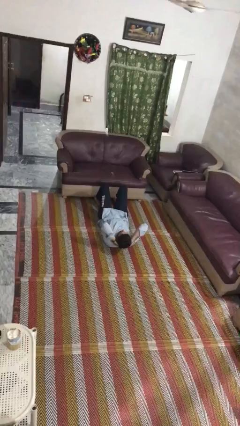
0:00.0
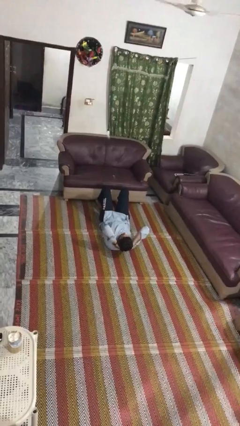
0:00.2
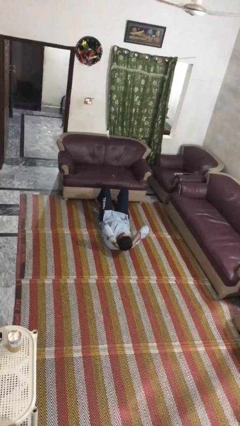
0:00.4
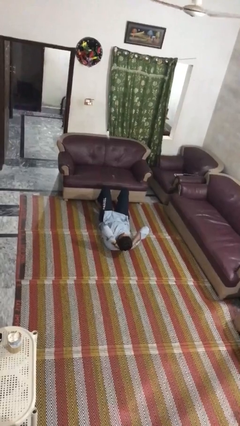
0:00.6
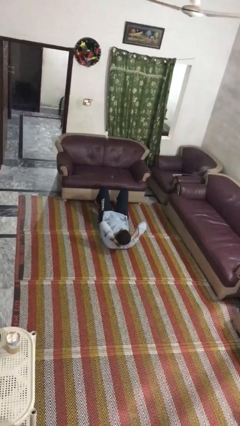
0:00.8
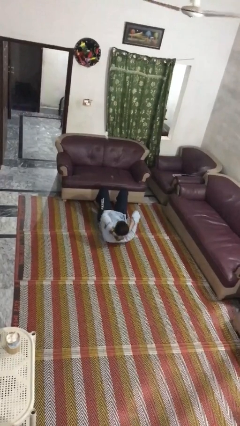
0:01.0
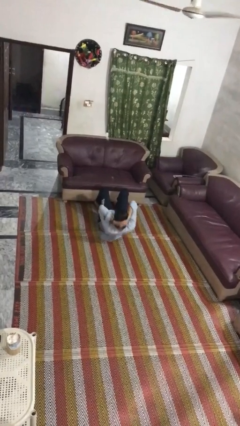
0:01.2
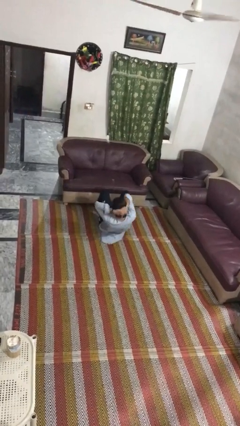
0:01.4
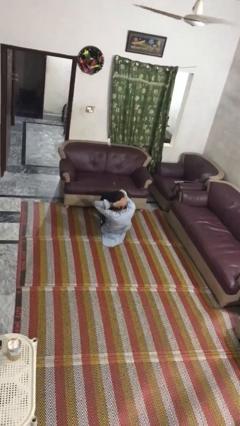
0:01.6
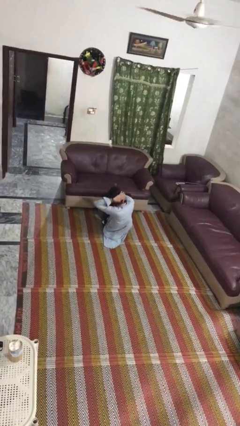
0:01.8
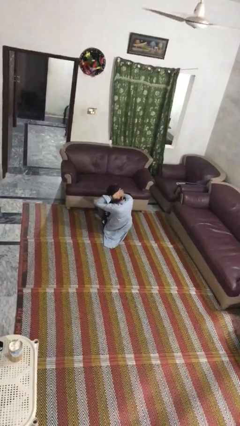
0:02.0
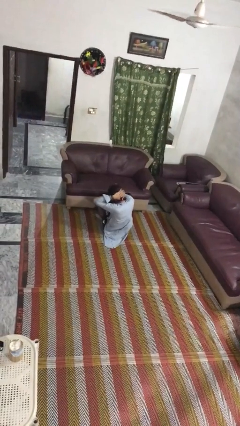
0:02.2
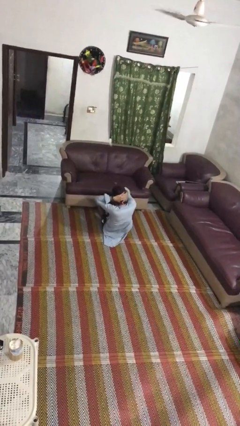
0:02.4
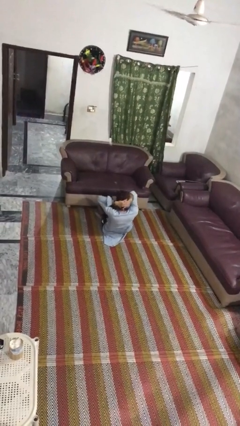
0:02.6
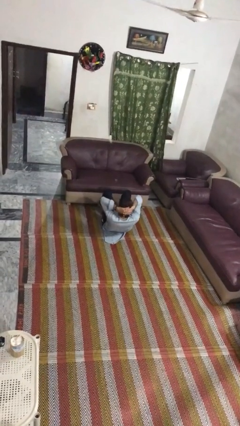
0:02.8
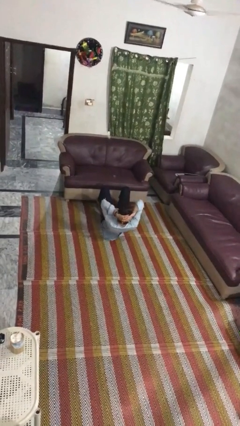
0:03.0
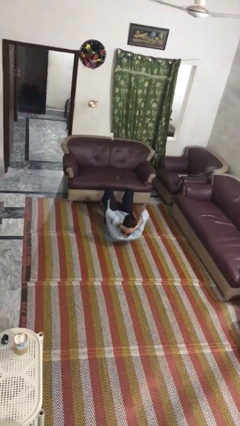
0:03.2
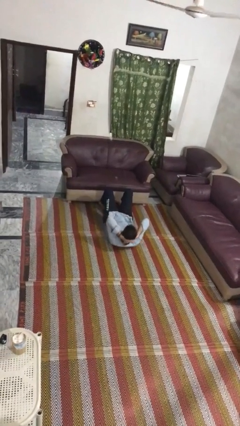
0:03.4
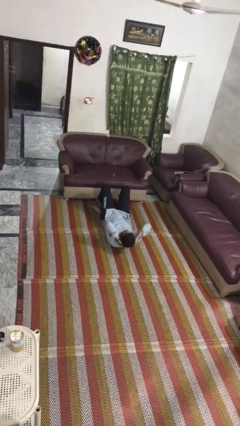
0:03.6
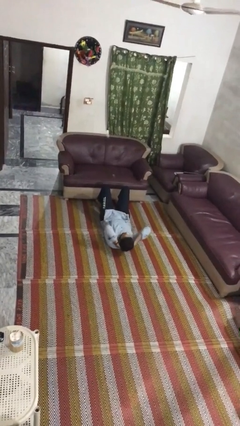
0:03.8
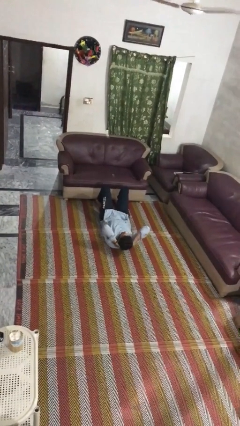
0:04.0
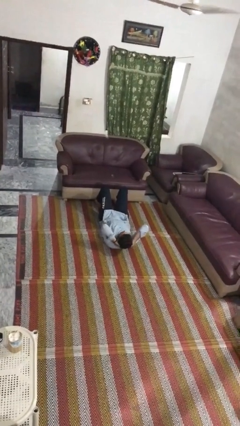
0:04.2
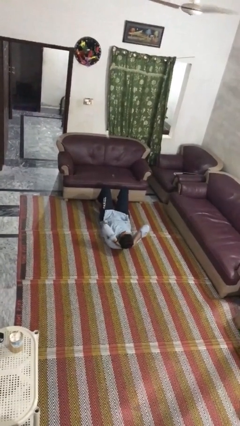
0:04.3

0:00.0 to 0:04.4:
person exercises with situp

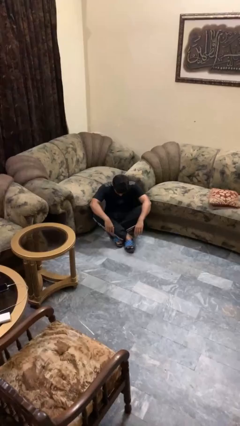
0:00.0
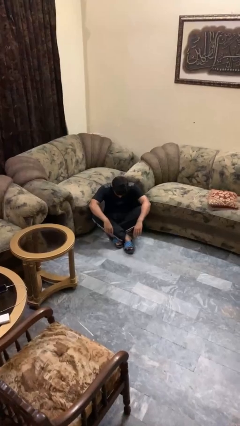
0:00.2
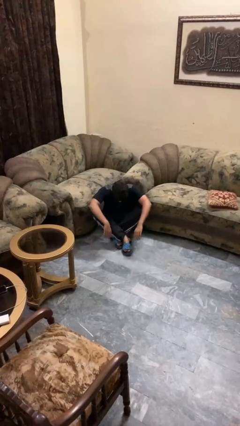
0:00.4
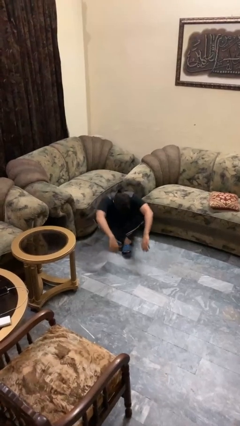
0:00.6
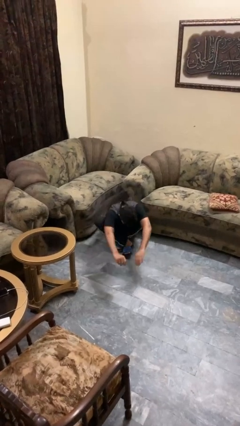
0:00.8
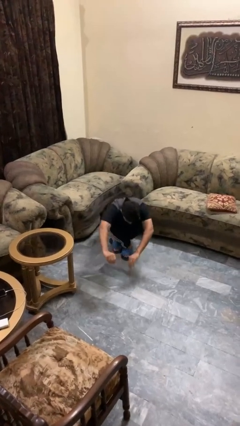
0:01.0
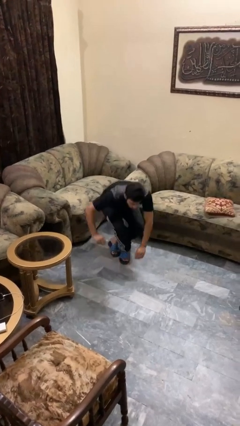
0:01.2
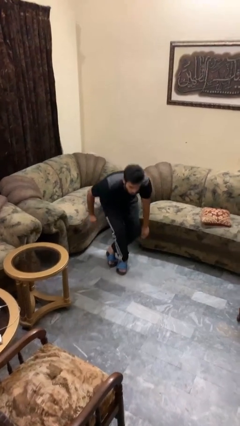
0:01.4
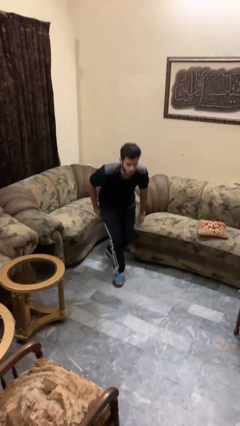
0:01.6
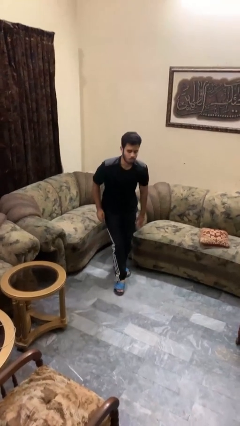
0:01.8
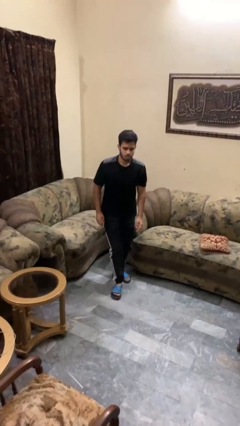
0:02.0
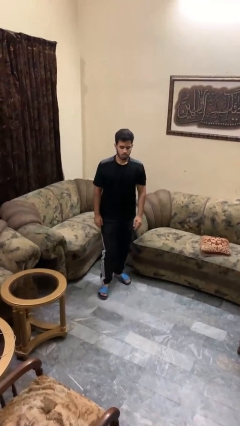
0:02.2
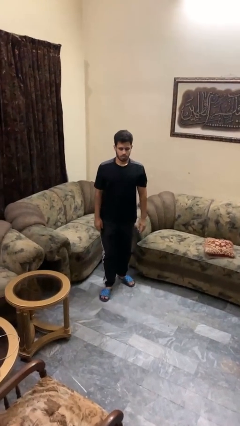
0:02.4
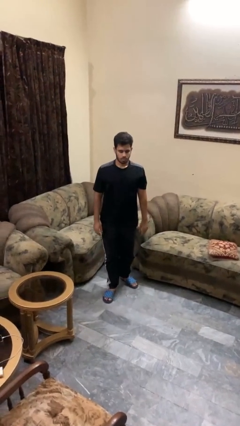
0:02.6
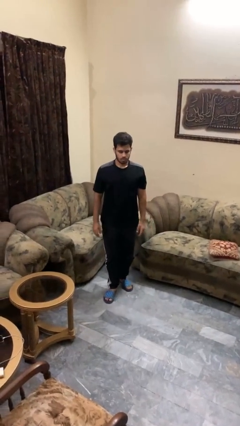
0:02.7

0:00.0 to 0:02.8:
person stands up from floor

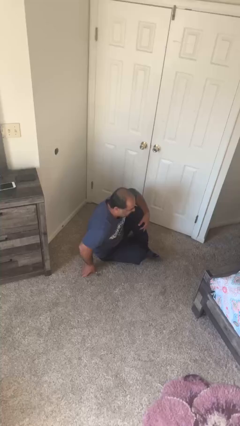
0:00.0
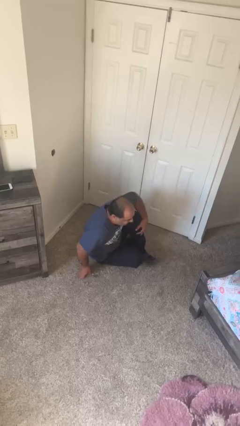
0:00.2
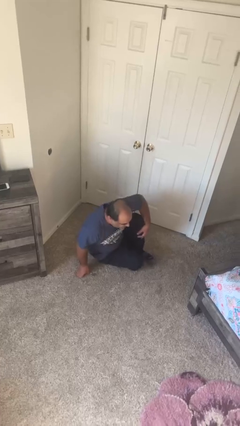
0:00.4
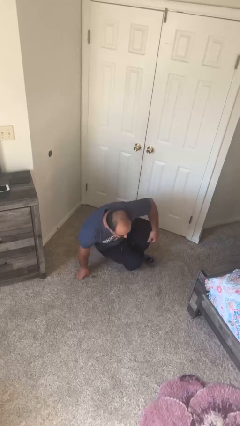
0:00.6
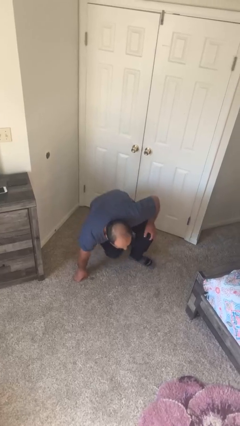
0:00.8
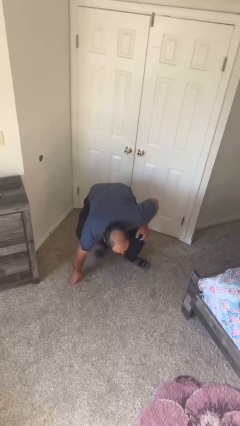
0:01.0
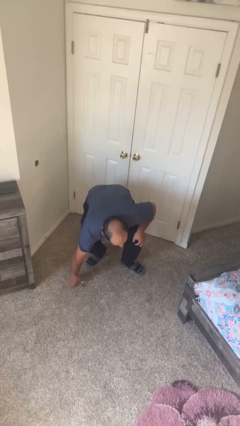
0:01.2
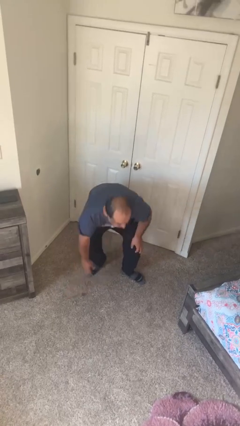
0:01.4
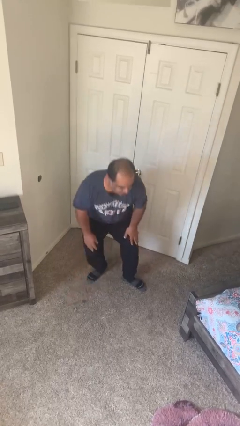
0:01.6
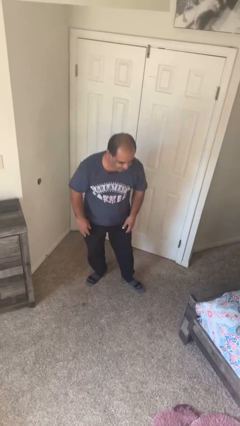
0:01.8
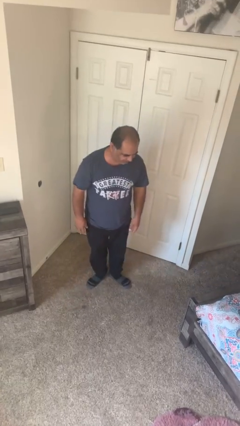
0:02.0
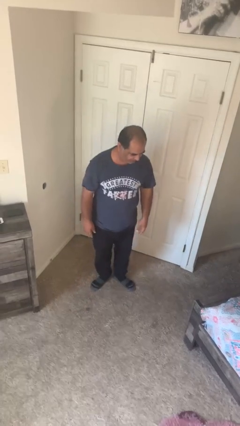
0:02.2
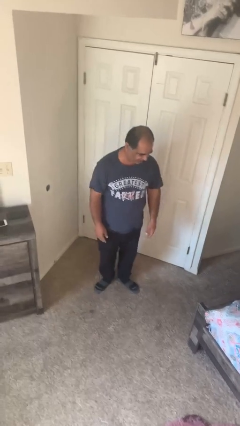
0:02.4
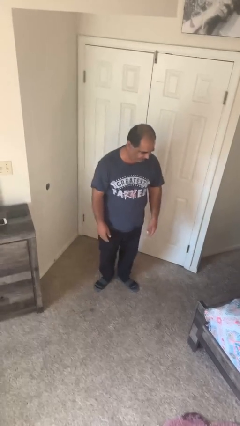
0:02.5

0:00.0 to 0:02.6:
person stands up

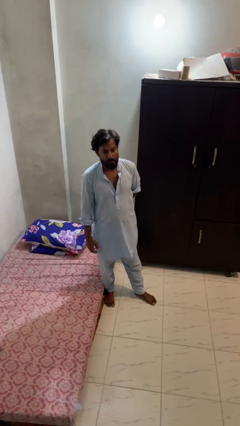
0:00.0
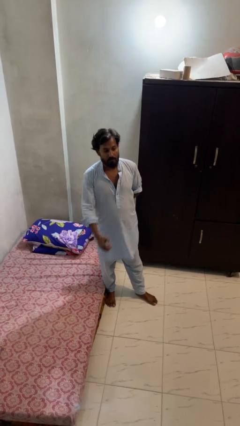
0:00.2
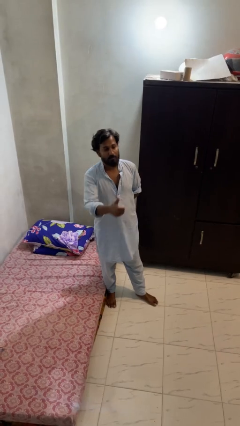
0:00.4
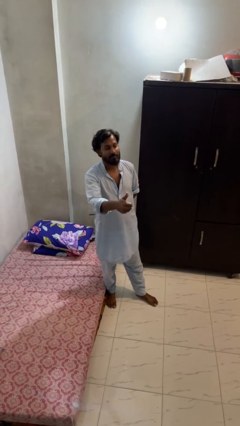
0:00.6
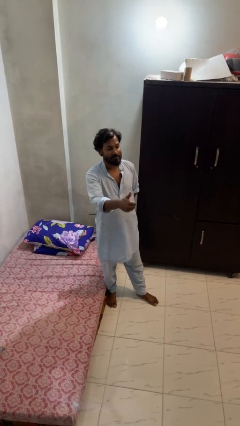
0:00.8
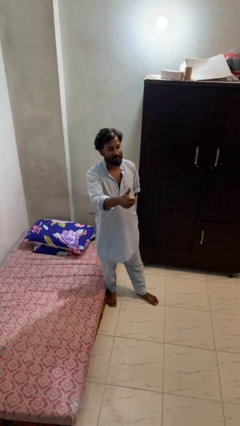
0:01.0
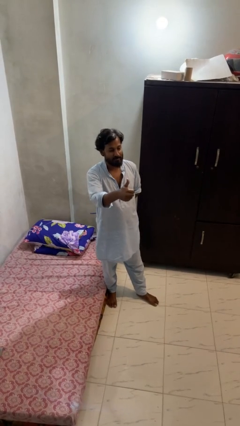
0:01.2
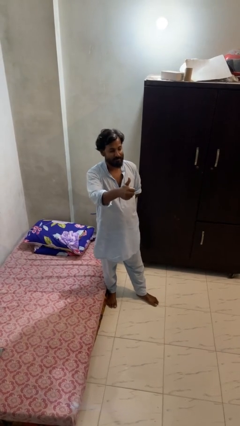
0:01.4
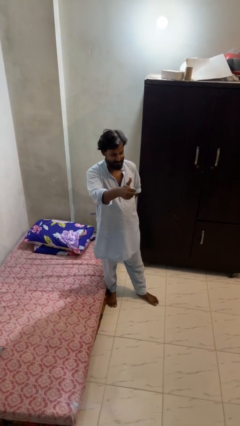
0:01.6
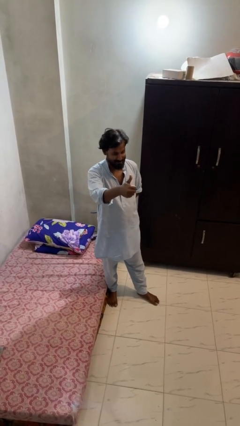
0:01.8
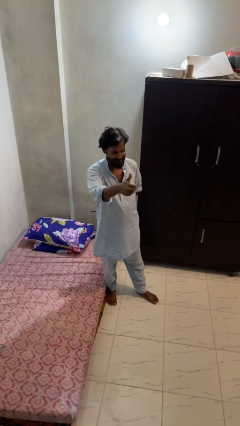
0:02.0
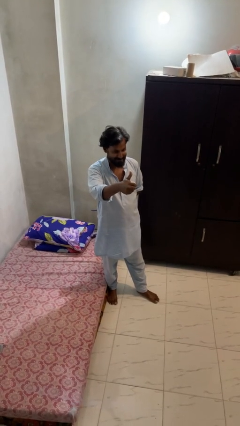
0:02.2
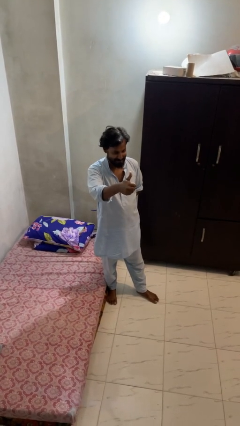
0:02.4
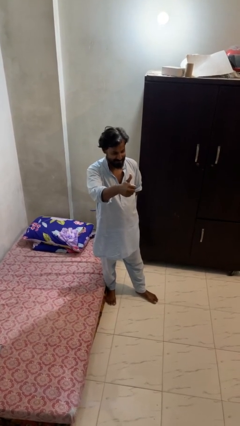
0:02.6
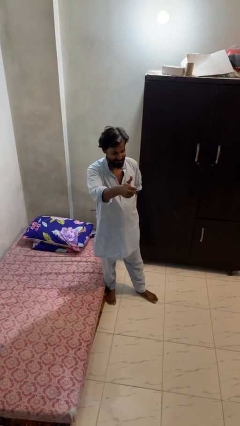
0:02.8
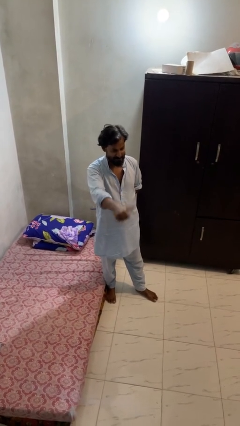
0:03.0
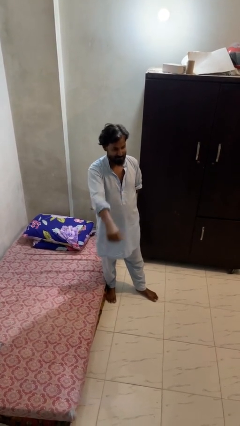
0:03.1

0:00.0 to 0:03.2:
person gestures thumbs up

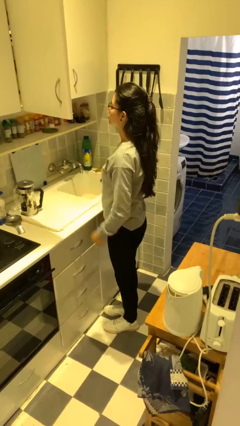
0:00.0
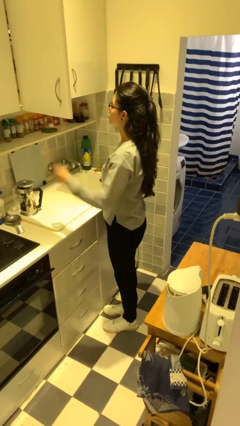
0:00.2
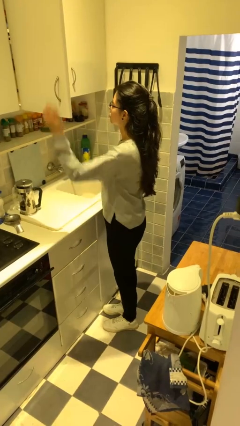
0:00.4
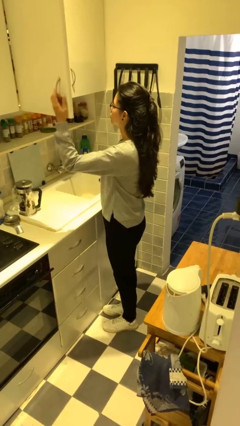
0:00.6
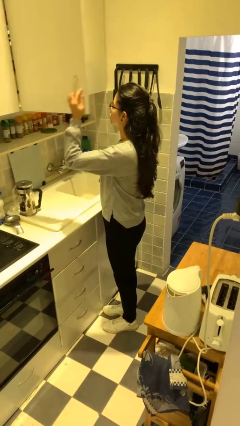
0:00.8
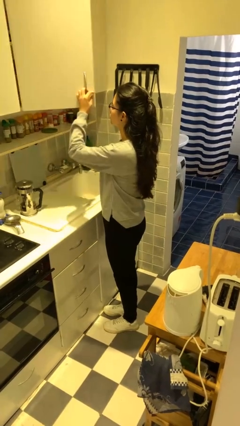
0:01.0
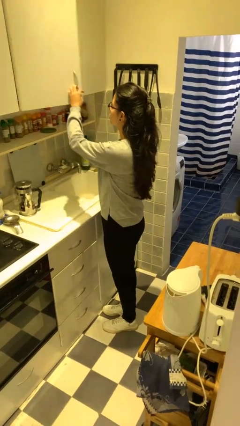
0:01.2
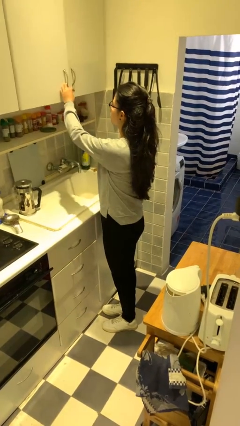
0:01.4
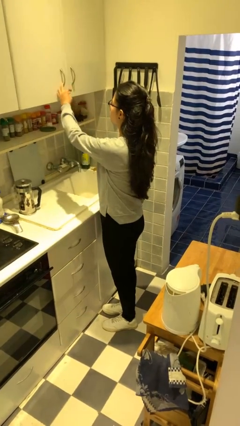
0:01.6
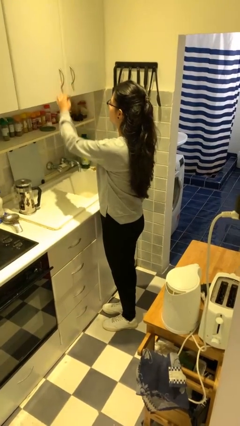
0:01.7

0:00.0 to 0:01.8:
person closes cabinet

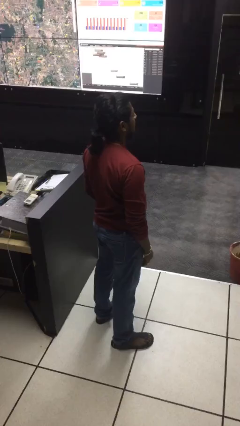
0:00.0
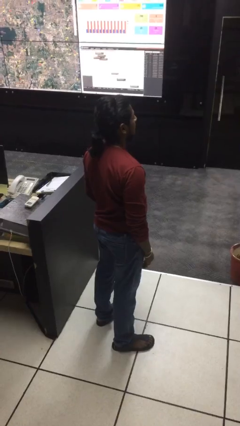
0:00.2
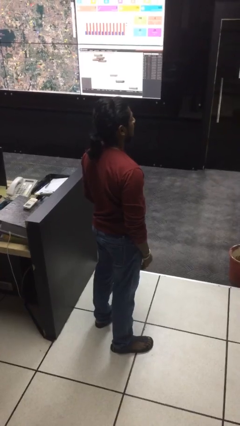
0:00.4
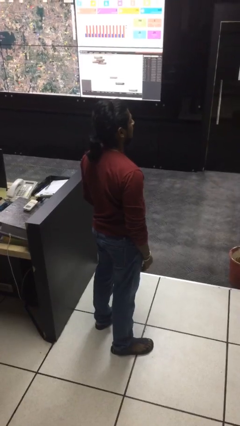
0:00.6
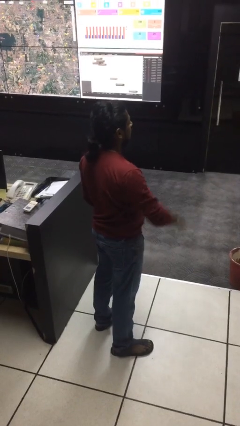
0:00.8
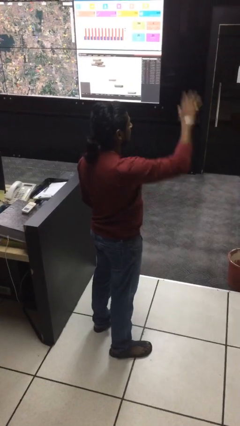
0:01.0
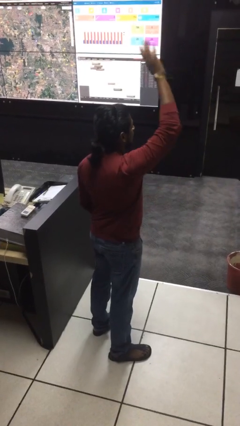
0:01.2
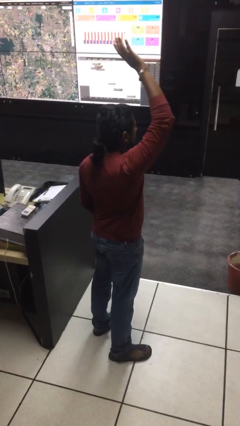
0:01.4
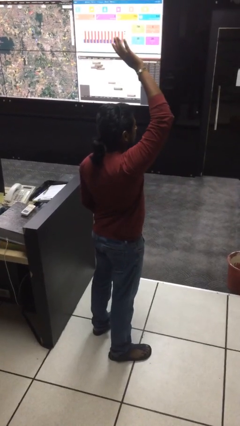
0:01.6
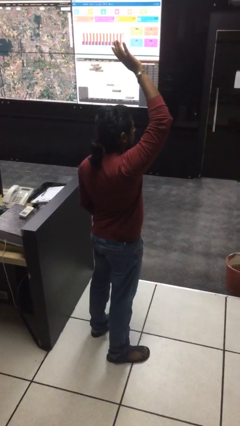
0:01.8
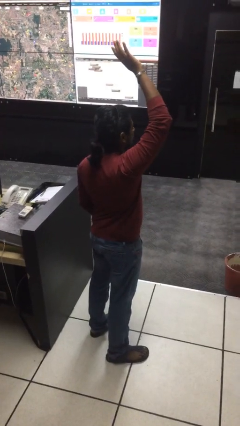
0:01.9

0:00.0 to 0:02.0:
person gestures raise hand

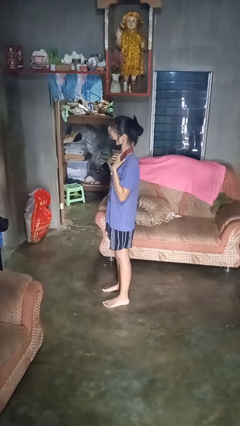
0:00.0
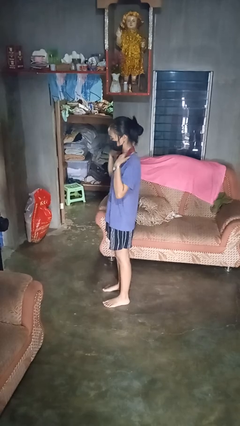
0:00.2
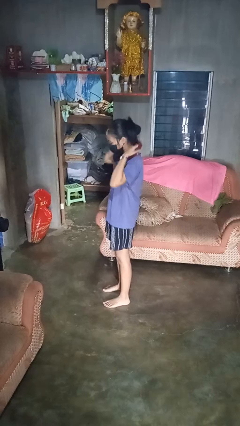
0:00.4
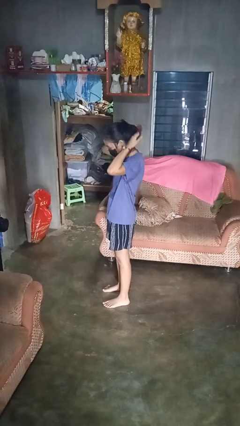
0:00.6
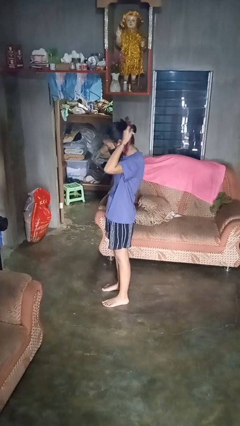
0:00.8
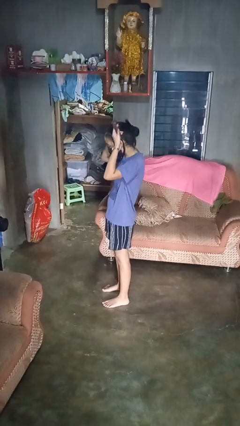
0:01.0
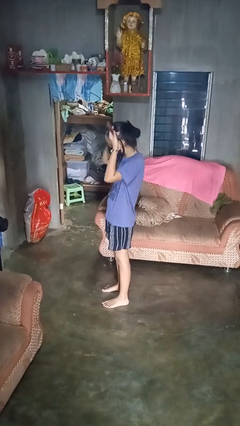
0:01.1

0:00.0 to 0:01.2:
person takes off necklace
